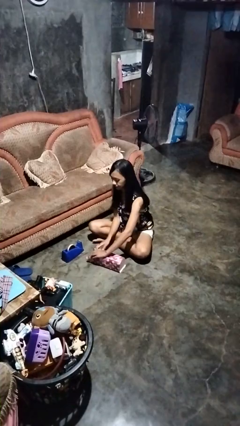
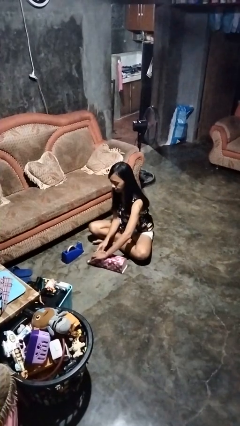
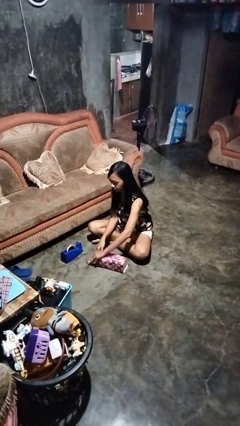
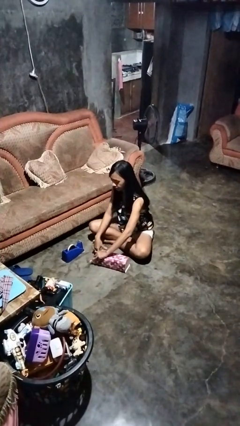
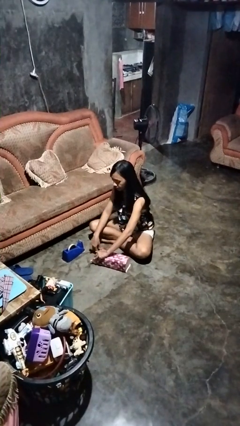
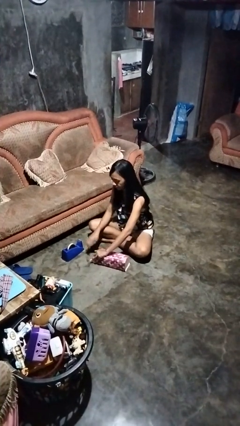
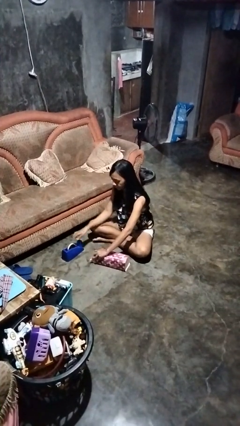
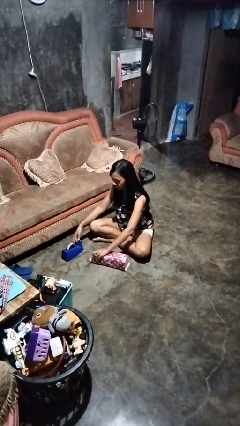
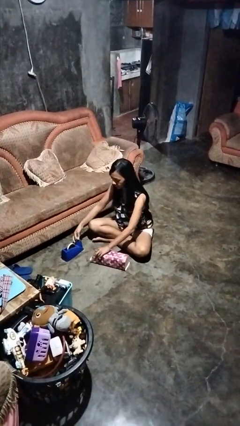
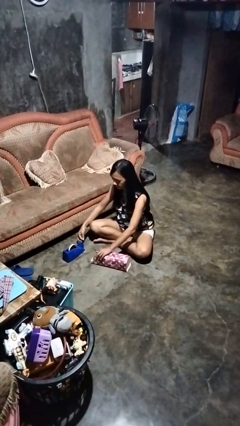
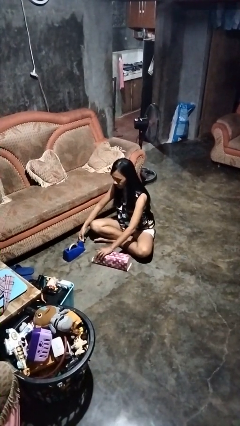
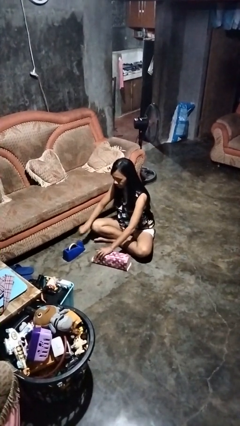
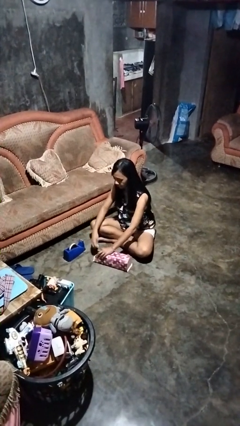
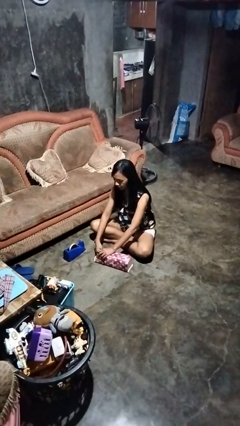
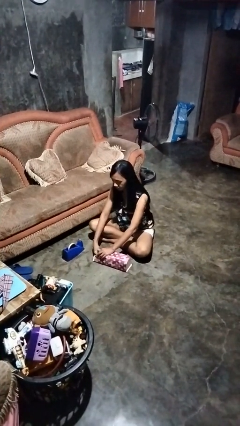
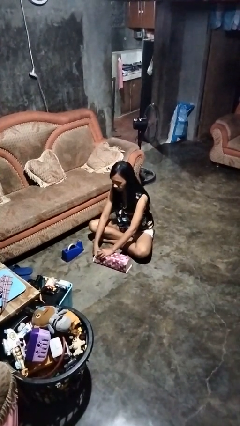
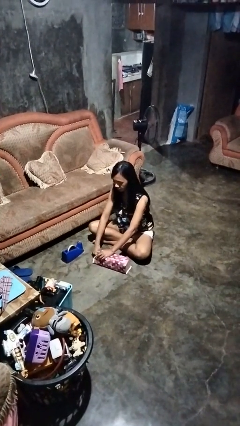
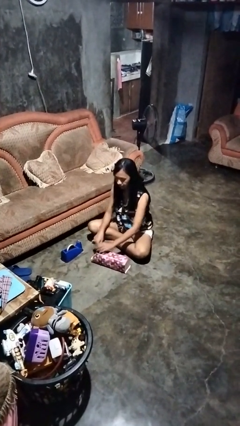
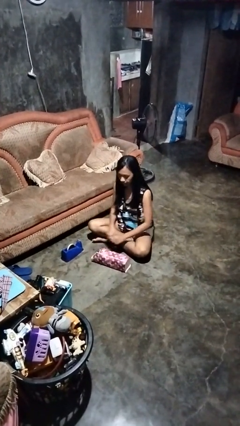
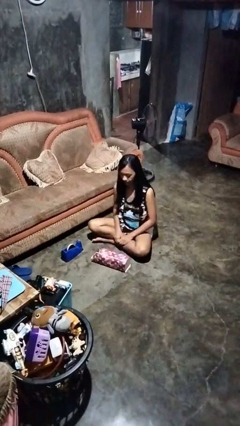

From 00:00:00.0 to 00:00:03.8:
person wraps box

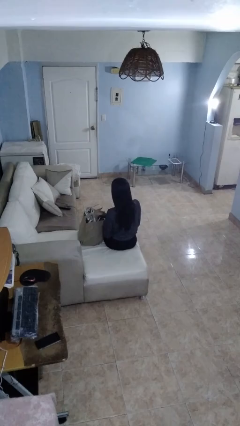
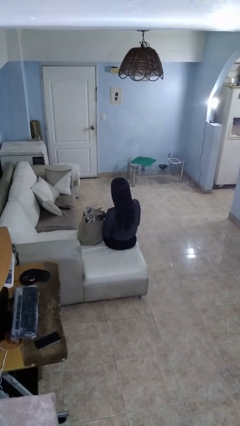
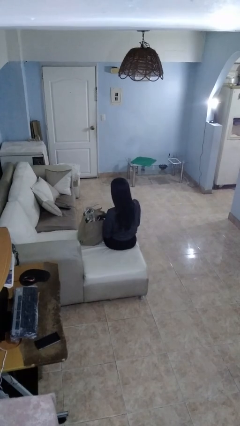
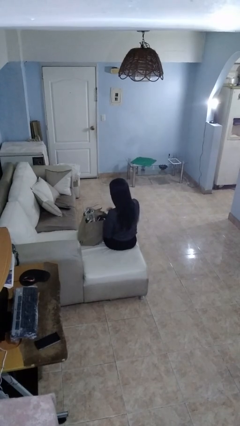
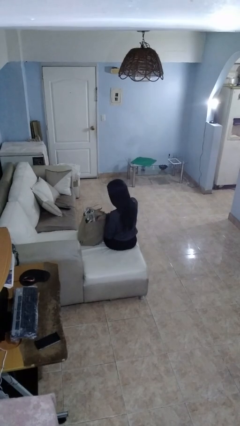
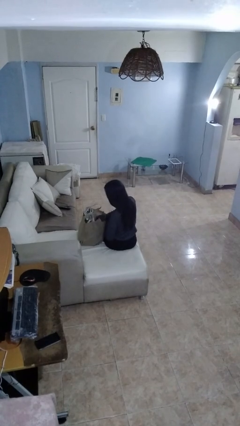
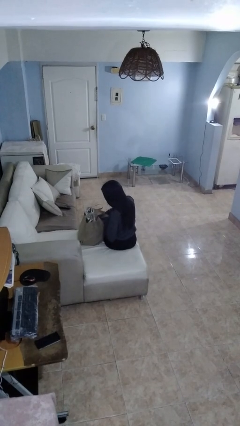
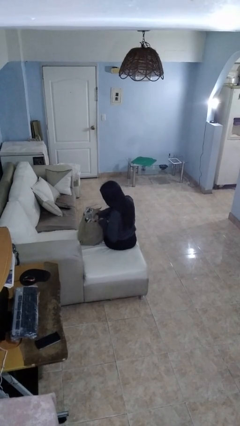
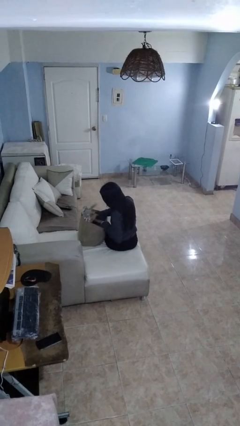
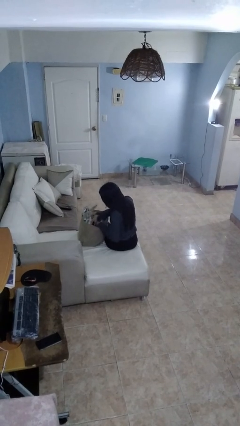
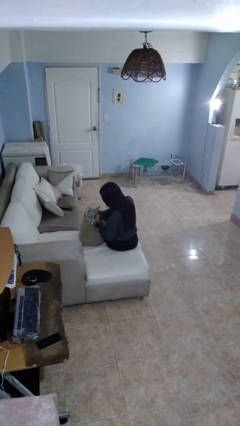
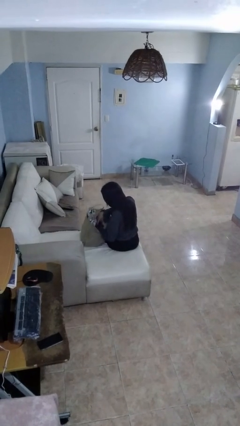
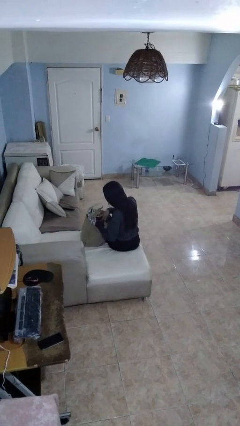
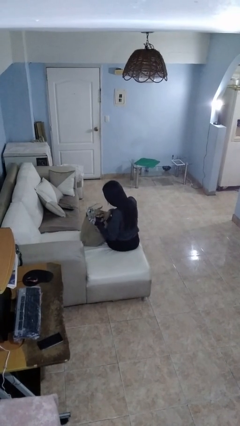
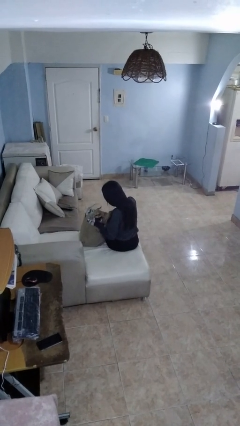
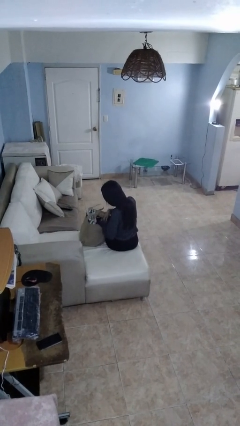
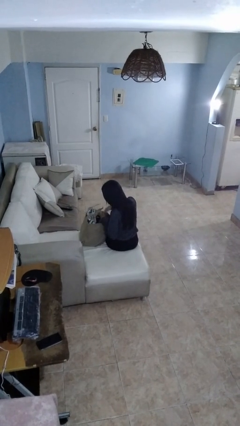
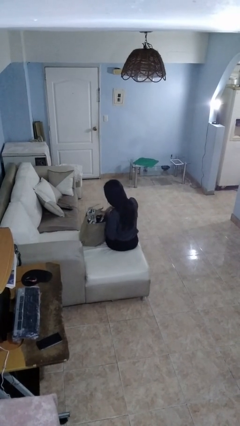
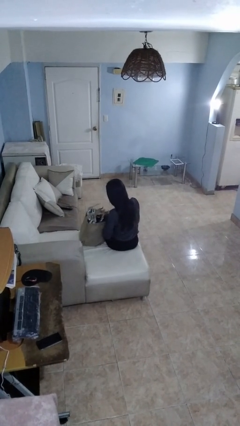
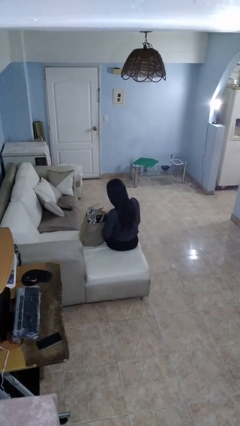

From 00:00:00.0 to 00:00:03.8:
person searches in bag

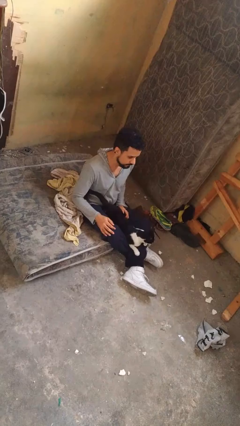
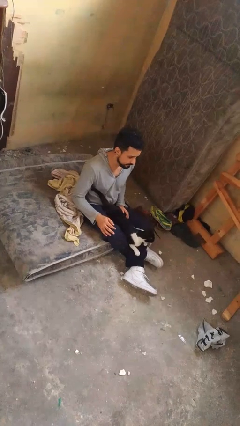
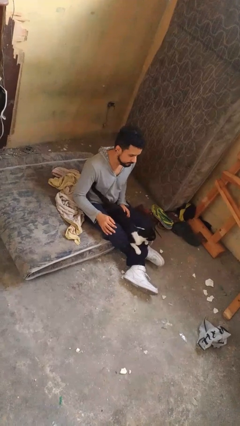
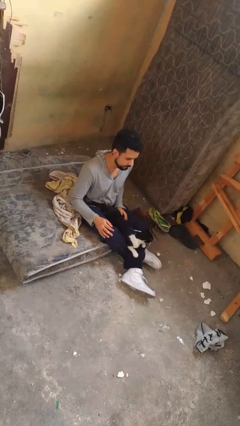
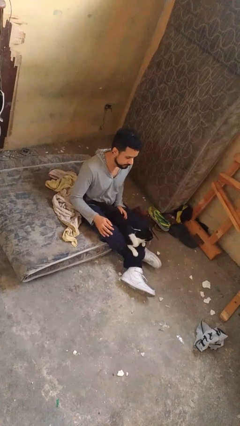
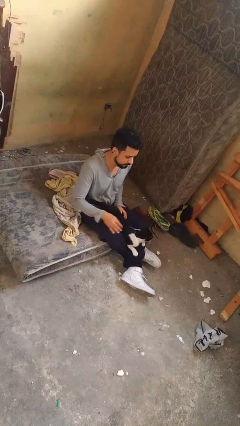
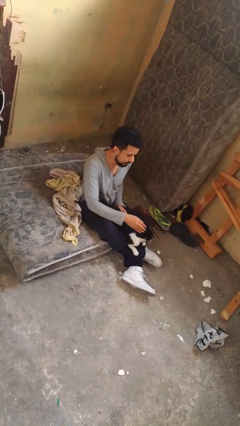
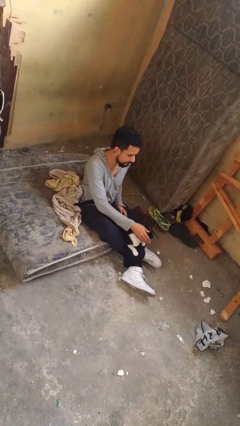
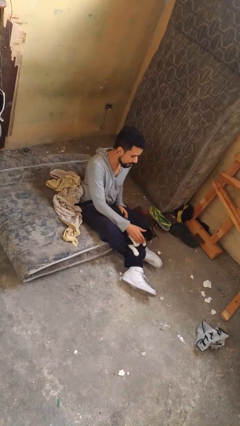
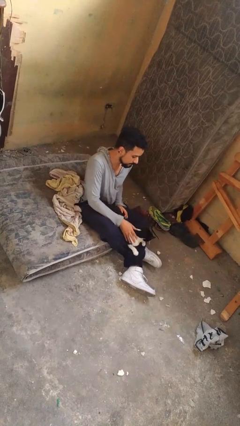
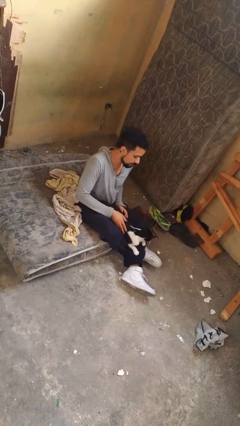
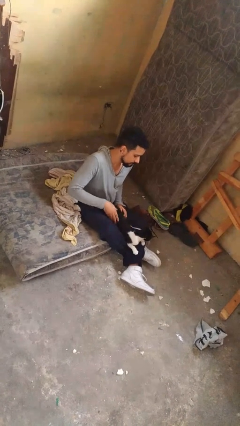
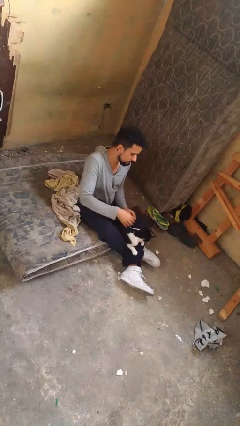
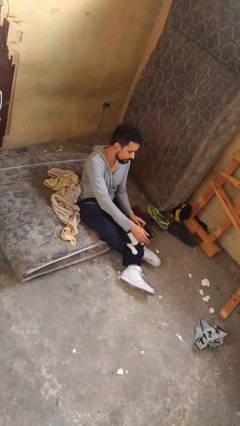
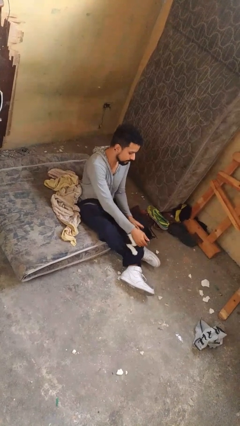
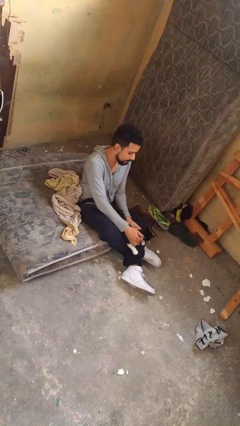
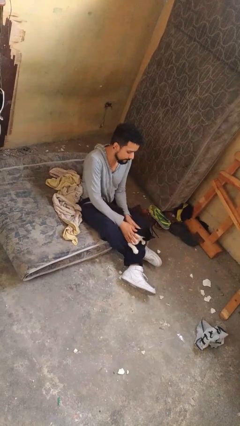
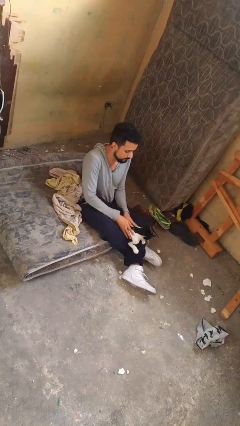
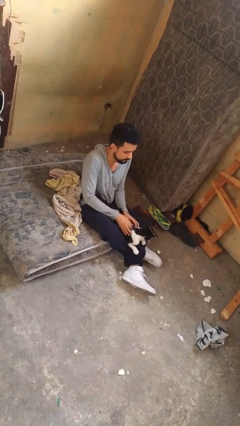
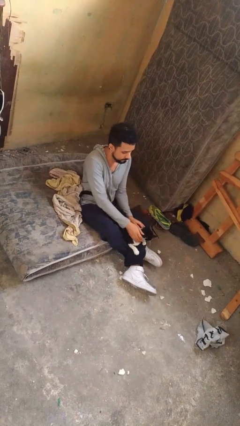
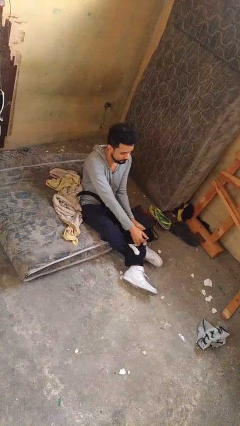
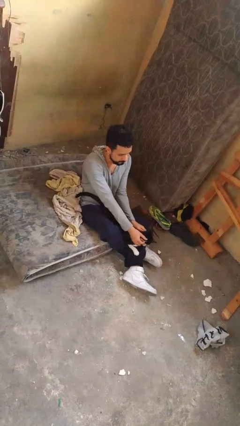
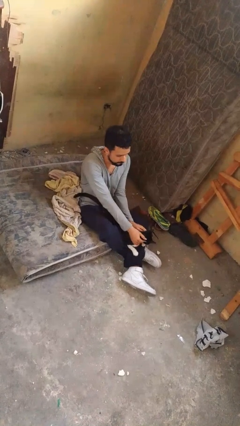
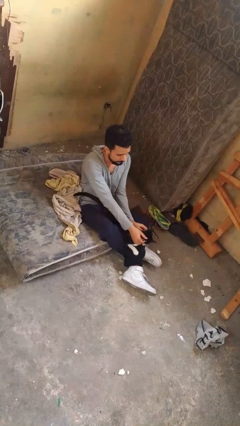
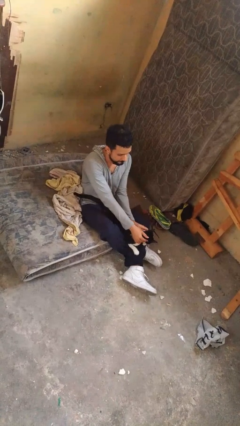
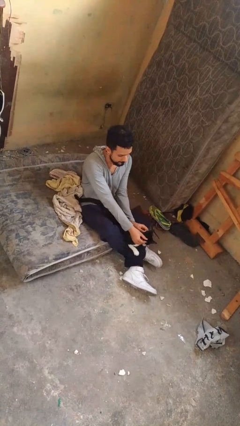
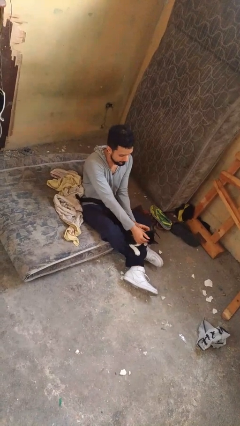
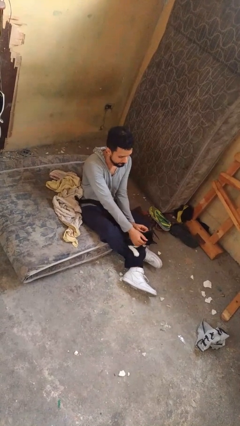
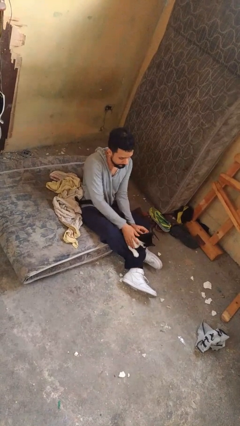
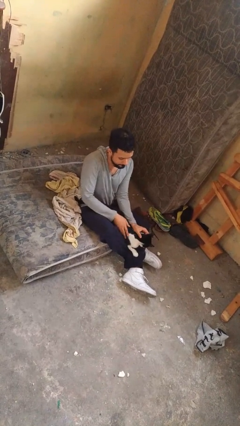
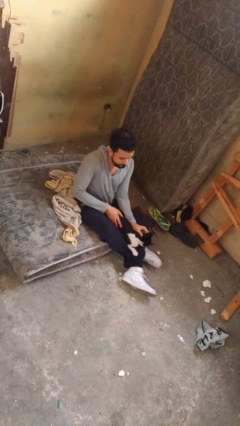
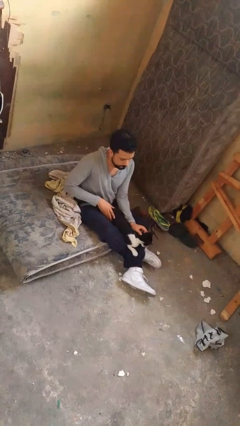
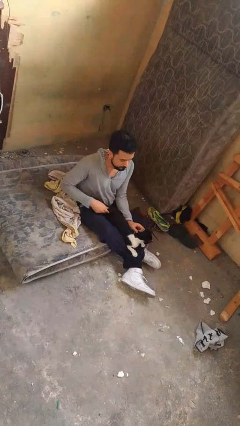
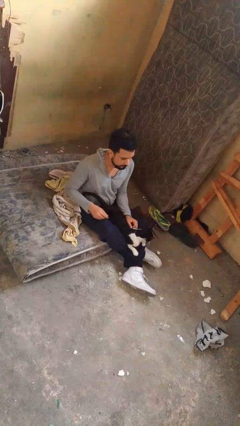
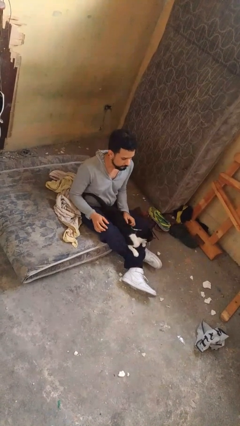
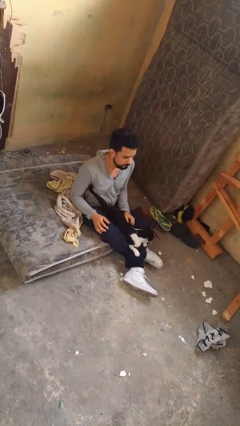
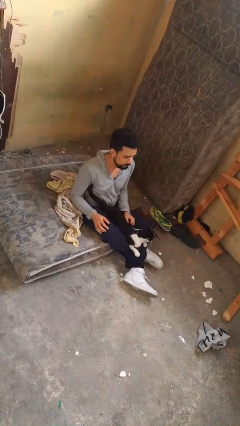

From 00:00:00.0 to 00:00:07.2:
person pets cat

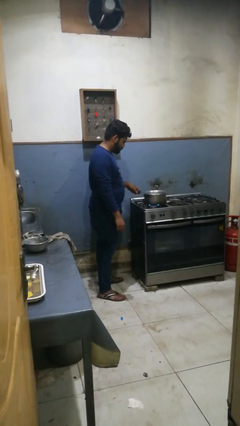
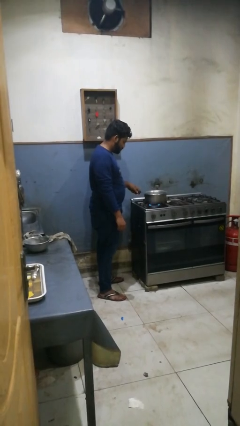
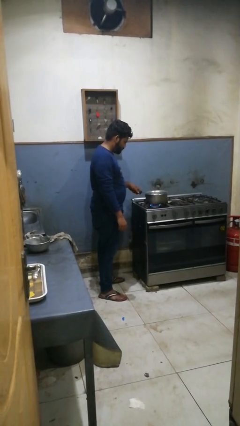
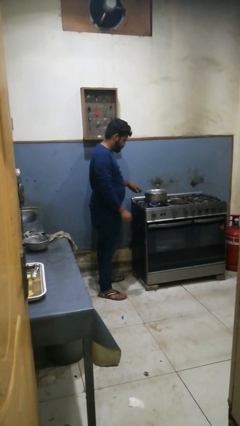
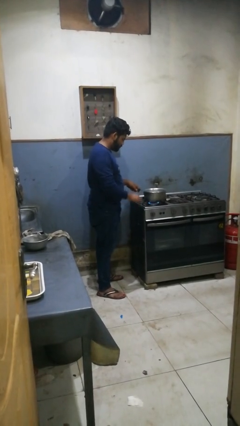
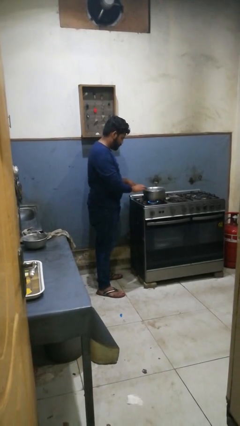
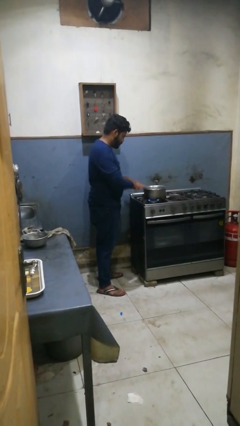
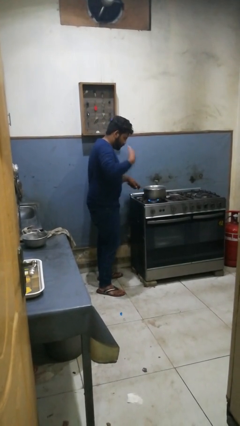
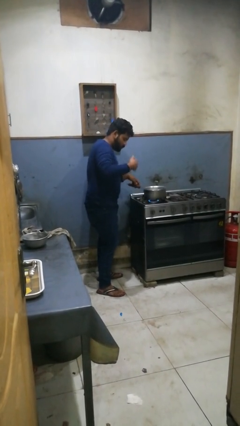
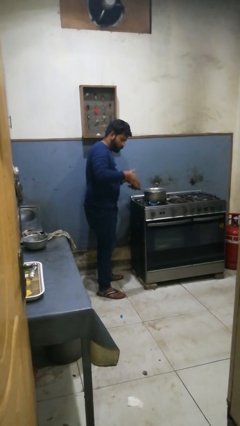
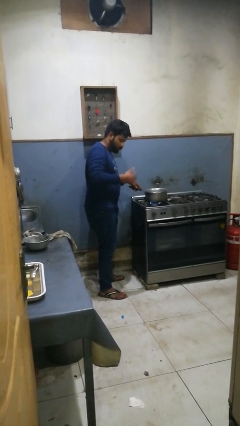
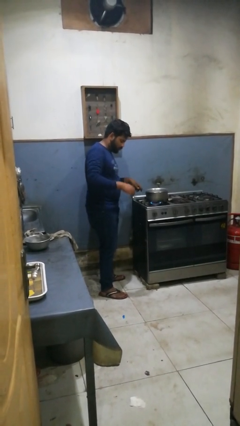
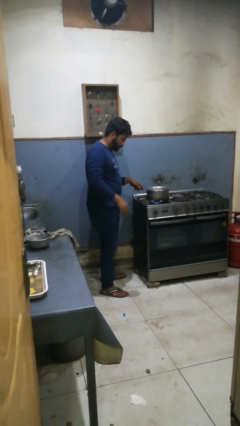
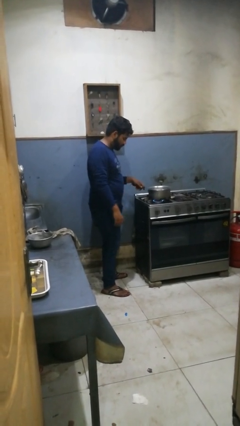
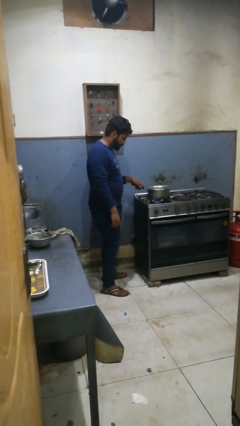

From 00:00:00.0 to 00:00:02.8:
person burns hand
